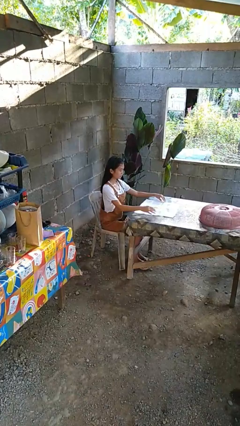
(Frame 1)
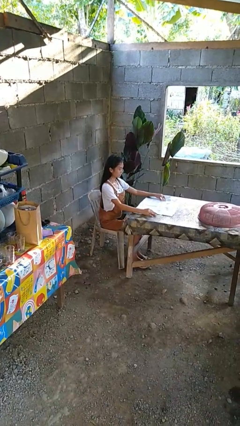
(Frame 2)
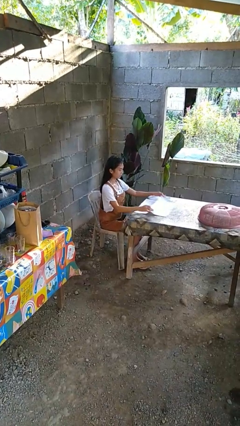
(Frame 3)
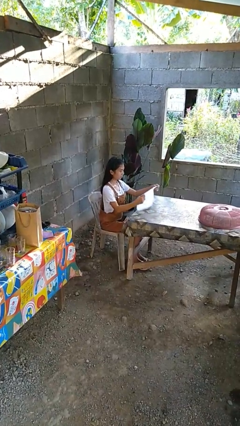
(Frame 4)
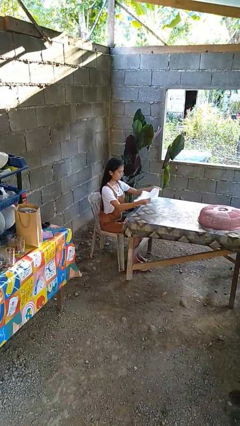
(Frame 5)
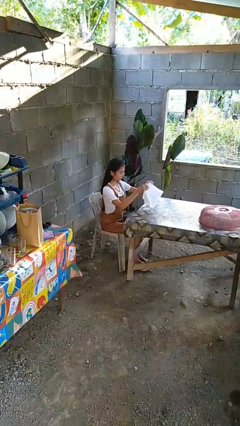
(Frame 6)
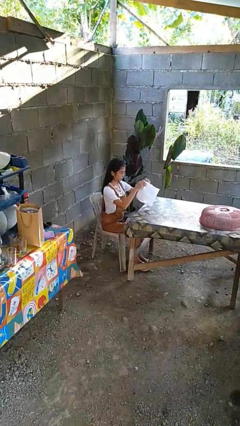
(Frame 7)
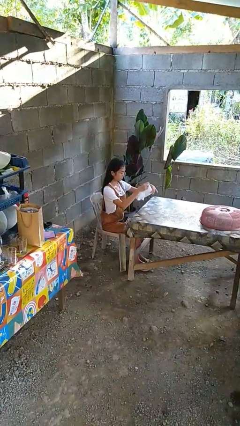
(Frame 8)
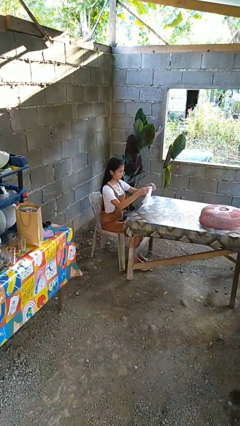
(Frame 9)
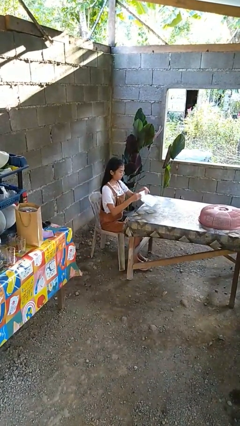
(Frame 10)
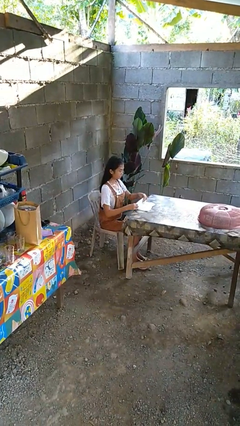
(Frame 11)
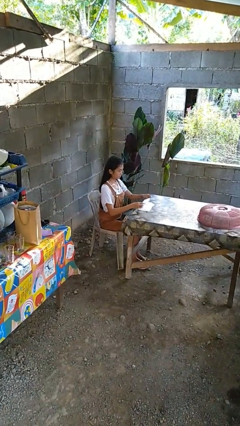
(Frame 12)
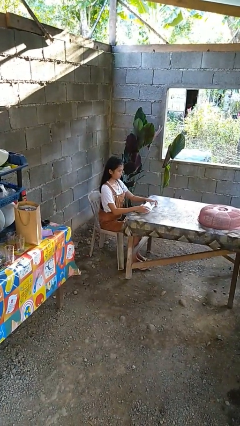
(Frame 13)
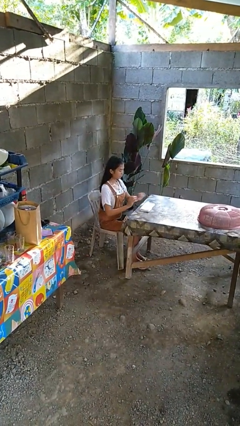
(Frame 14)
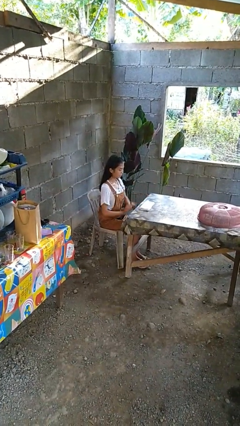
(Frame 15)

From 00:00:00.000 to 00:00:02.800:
person folds tablecloth

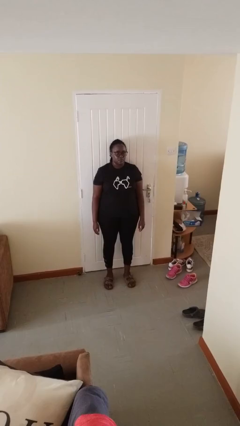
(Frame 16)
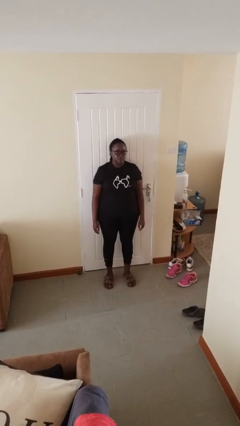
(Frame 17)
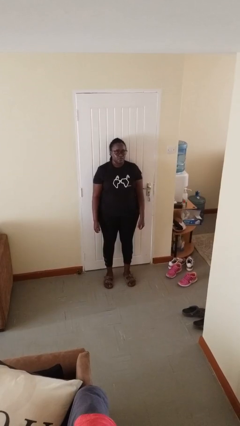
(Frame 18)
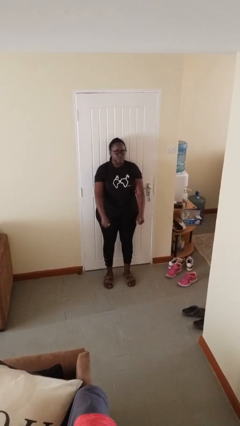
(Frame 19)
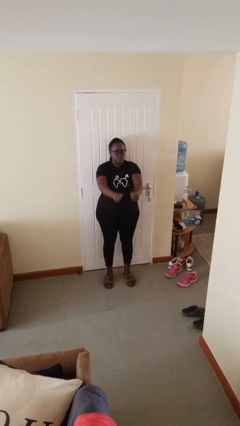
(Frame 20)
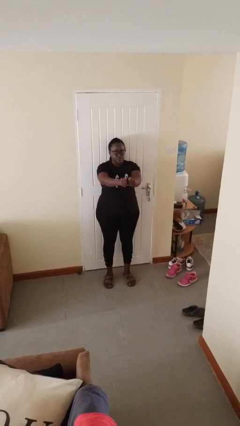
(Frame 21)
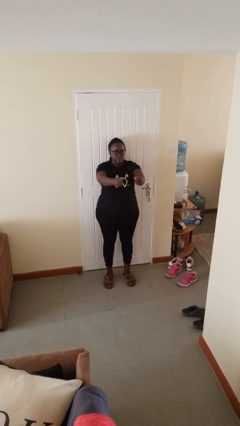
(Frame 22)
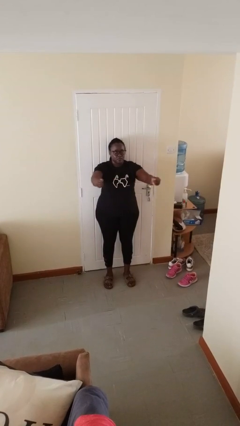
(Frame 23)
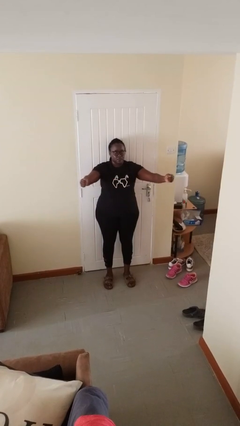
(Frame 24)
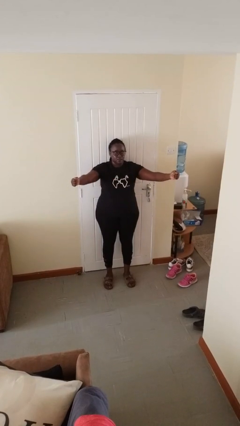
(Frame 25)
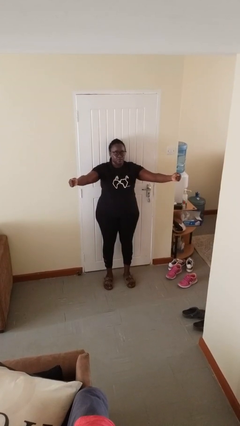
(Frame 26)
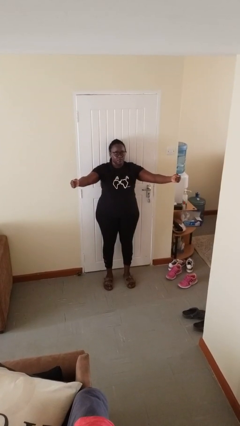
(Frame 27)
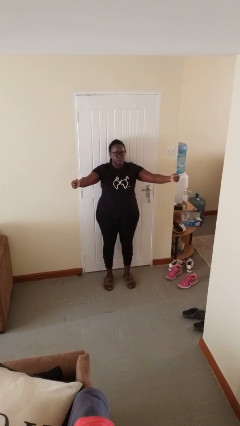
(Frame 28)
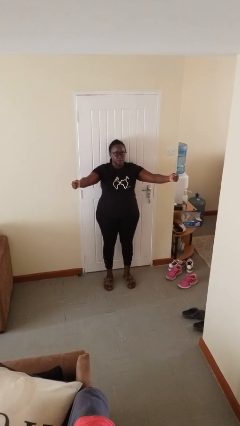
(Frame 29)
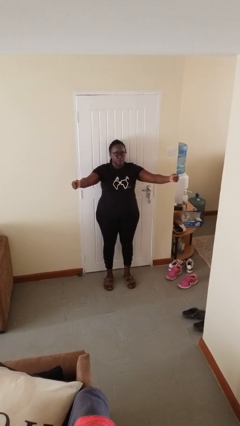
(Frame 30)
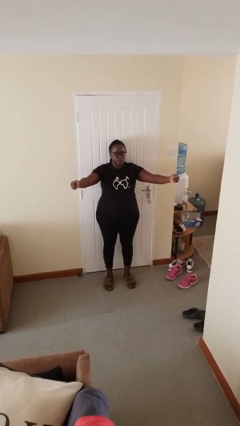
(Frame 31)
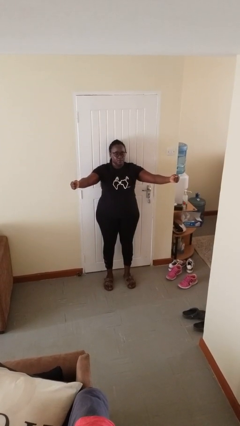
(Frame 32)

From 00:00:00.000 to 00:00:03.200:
person gestures zoom in

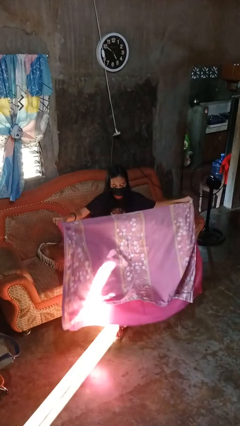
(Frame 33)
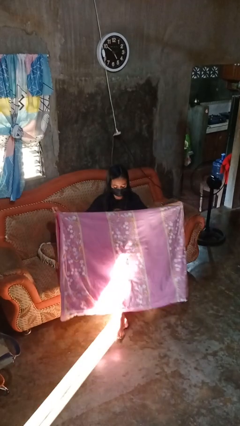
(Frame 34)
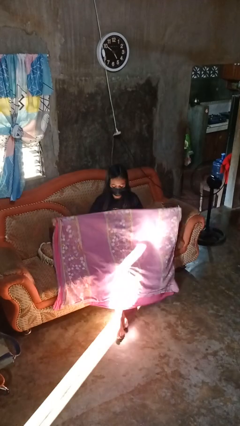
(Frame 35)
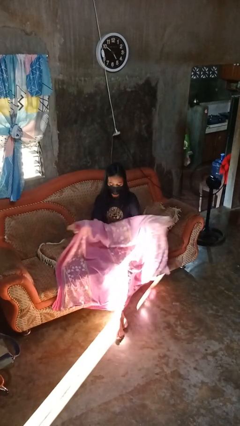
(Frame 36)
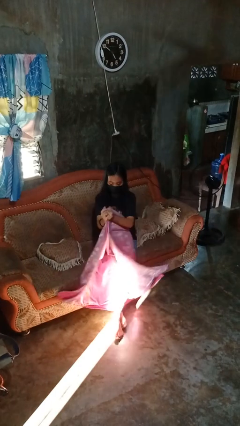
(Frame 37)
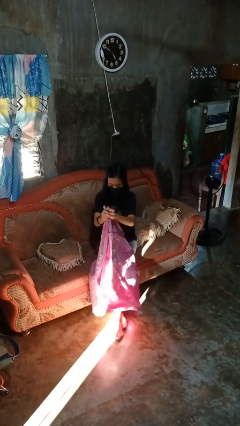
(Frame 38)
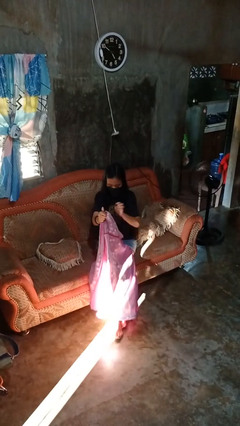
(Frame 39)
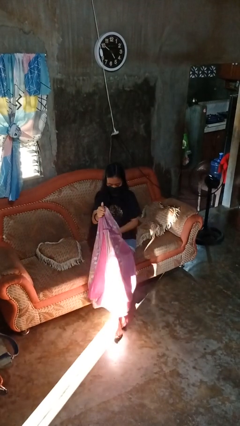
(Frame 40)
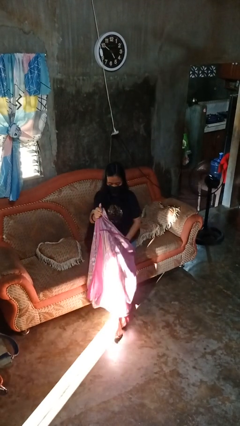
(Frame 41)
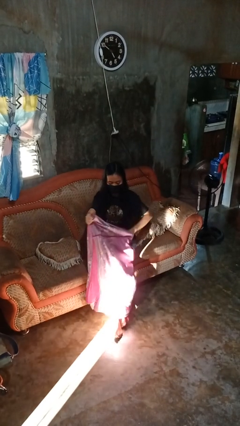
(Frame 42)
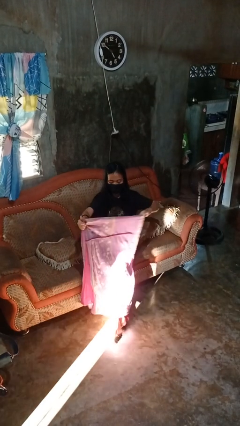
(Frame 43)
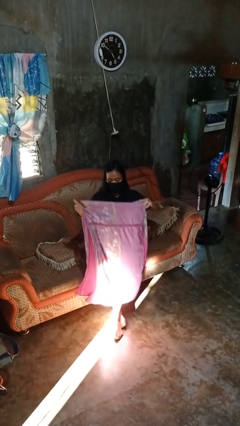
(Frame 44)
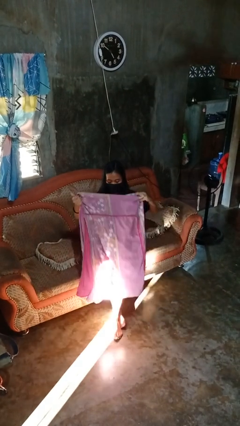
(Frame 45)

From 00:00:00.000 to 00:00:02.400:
person folds blanket

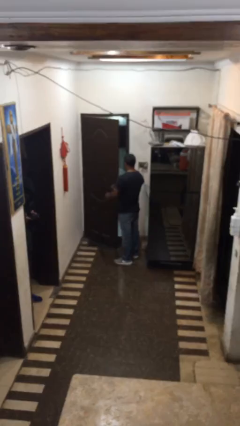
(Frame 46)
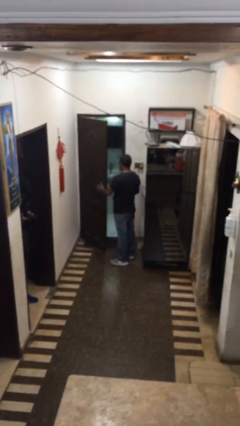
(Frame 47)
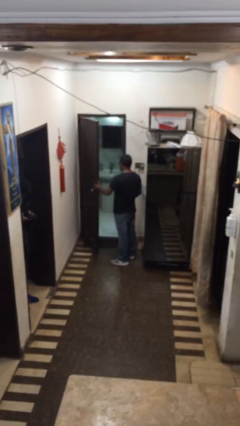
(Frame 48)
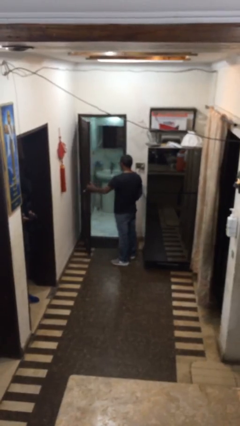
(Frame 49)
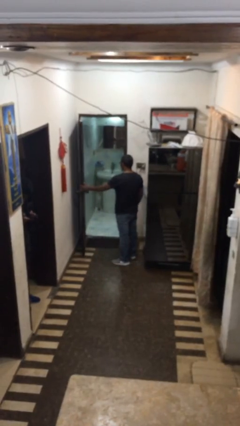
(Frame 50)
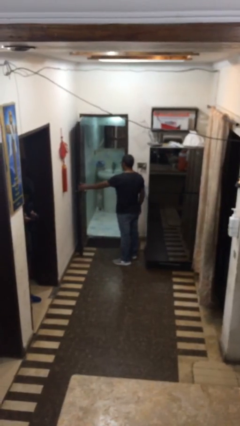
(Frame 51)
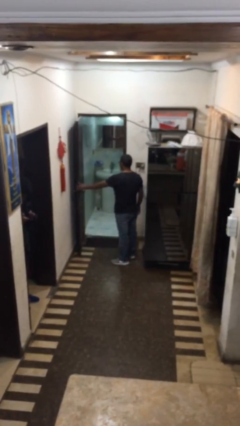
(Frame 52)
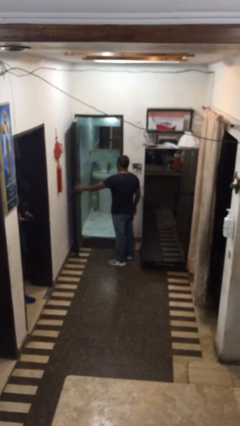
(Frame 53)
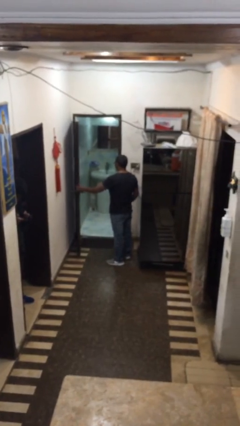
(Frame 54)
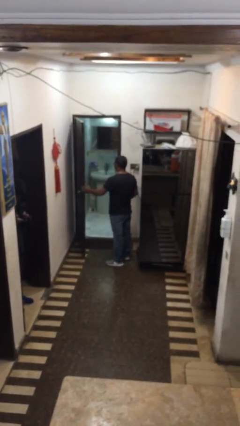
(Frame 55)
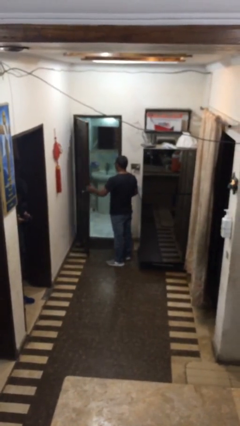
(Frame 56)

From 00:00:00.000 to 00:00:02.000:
person opens facility door

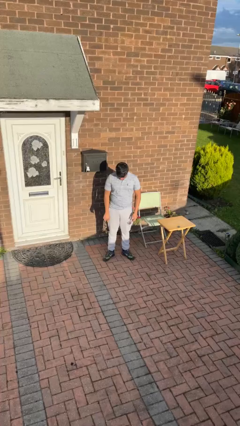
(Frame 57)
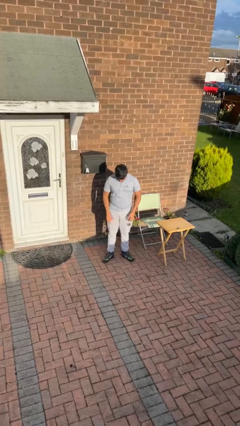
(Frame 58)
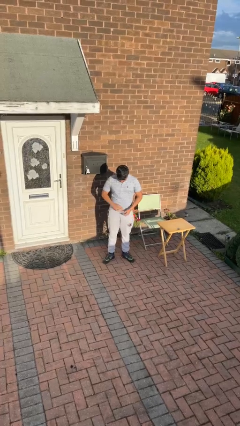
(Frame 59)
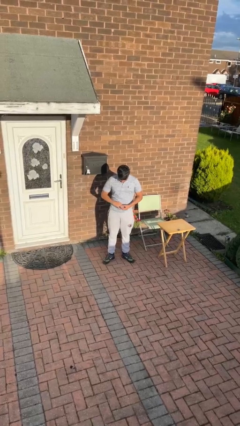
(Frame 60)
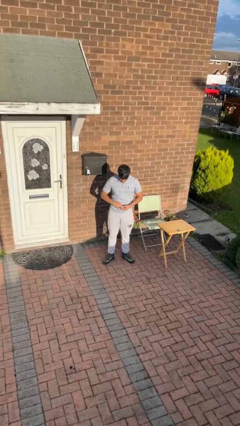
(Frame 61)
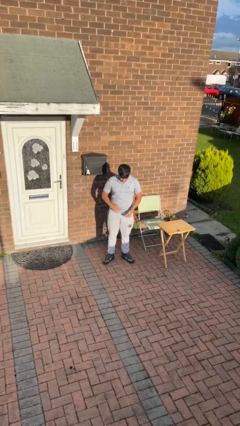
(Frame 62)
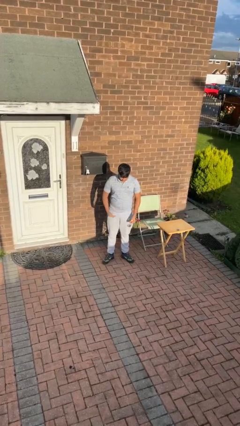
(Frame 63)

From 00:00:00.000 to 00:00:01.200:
person takes off ring

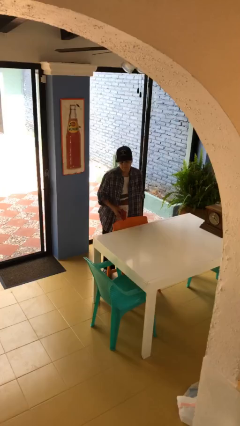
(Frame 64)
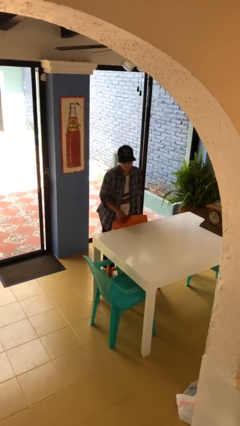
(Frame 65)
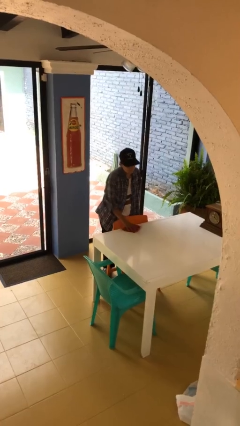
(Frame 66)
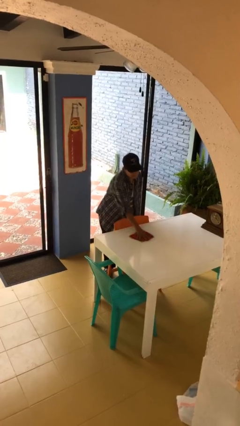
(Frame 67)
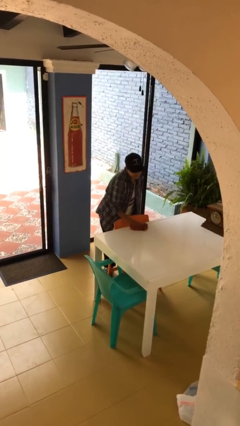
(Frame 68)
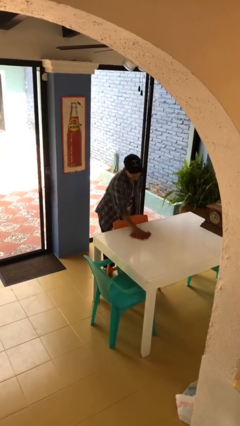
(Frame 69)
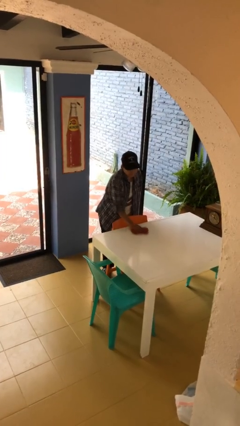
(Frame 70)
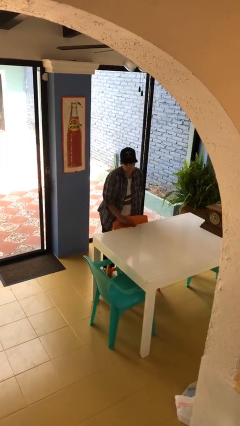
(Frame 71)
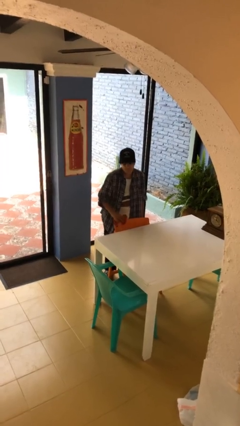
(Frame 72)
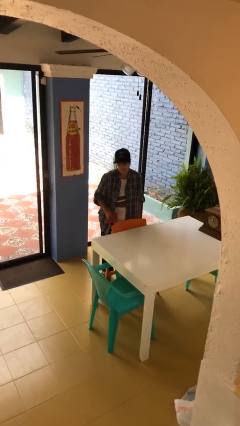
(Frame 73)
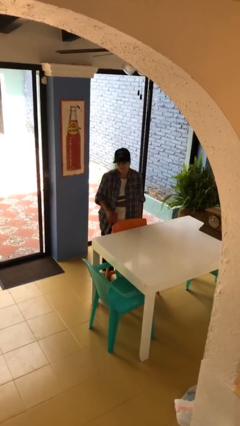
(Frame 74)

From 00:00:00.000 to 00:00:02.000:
person cleans table with rag

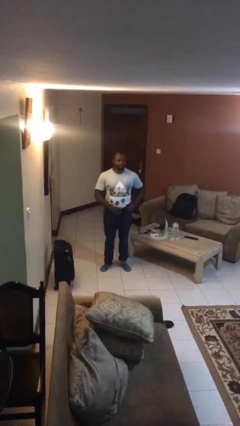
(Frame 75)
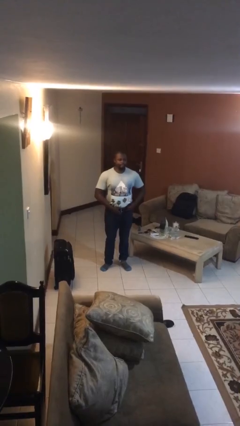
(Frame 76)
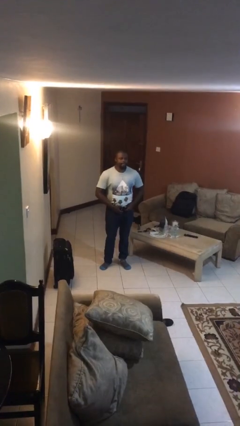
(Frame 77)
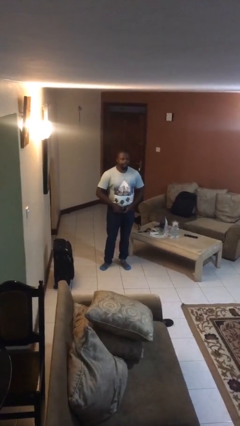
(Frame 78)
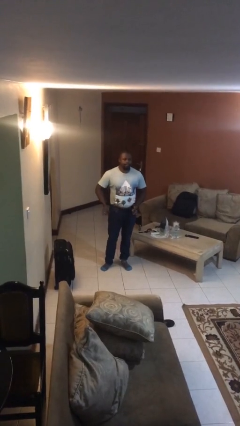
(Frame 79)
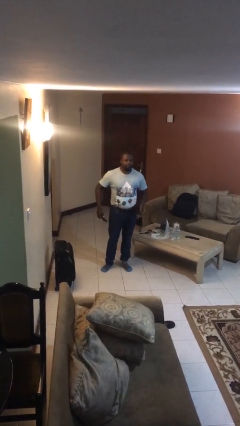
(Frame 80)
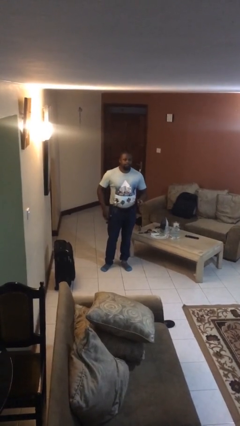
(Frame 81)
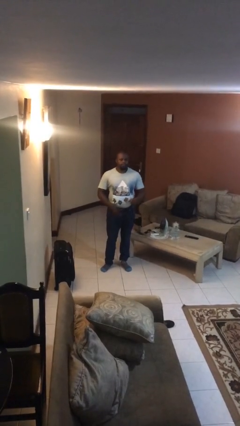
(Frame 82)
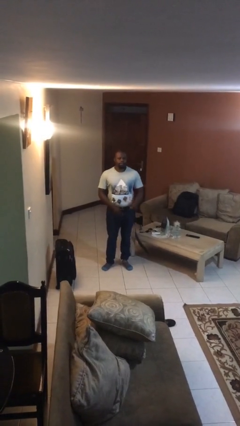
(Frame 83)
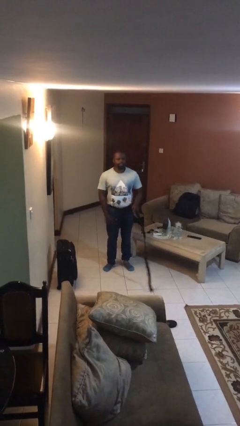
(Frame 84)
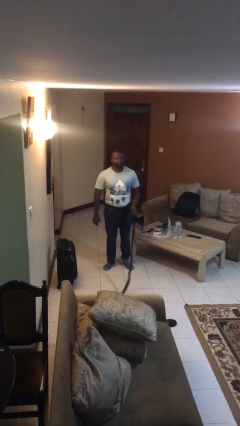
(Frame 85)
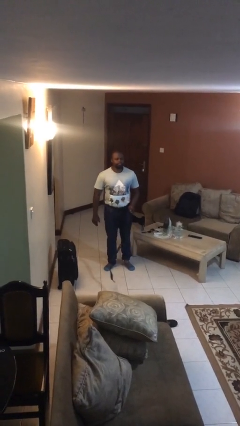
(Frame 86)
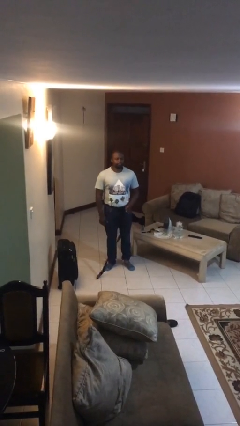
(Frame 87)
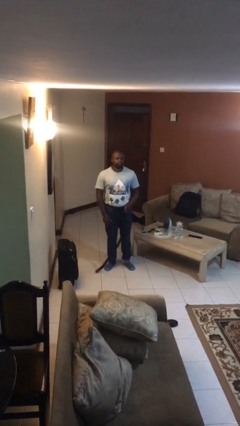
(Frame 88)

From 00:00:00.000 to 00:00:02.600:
person takes off belt

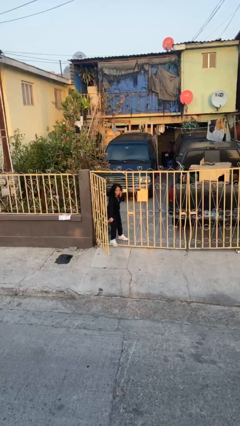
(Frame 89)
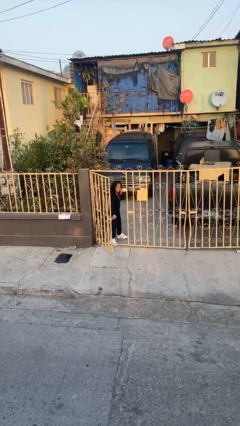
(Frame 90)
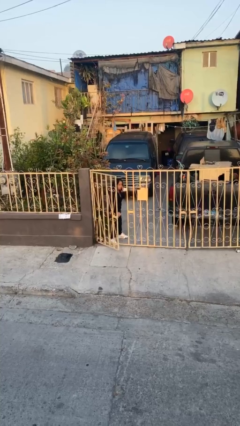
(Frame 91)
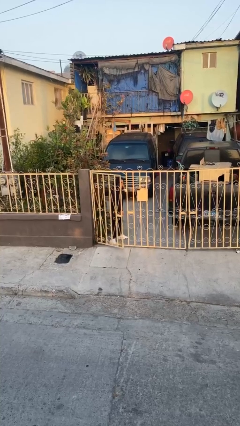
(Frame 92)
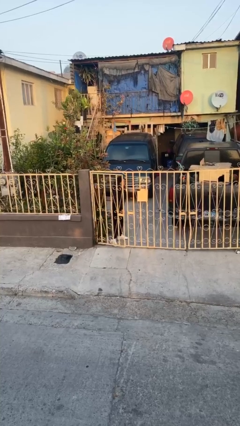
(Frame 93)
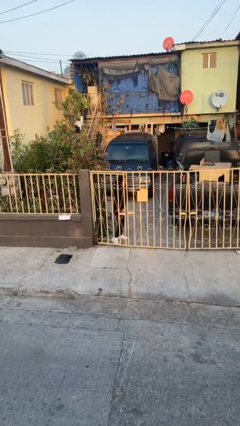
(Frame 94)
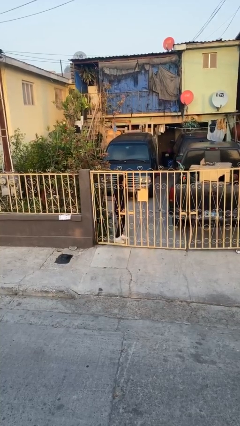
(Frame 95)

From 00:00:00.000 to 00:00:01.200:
person closes facility door
